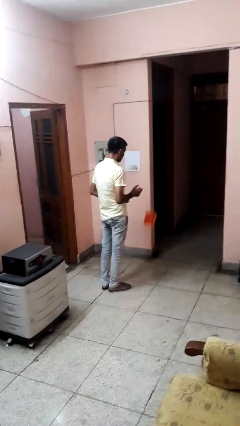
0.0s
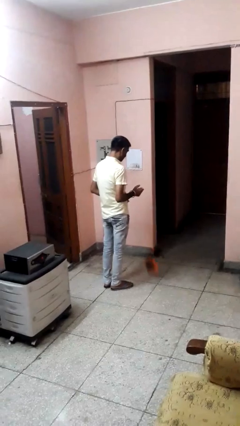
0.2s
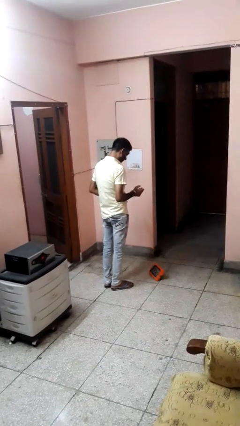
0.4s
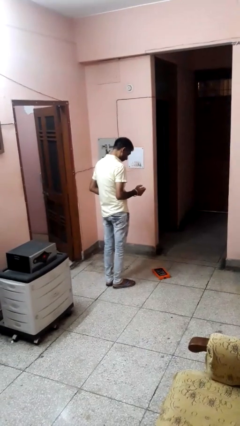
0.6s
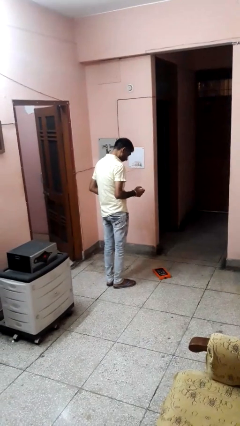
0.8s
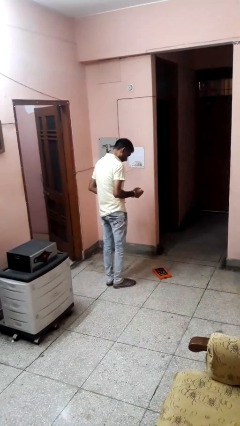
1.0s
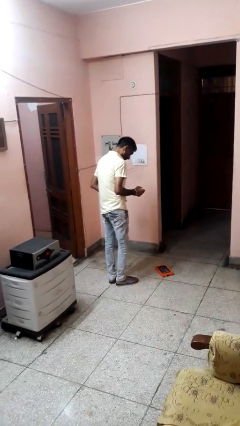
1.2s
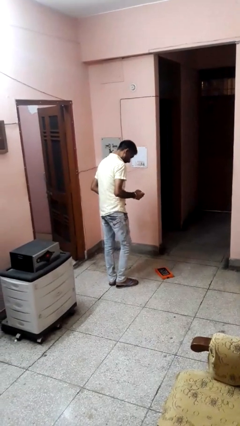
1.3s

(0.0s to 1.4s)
person drops object

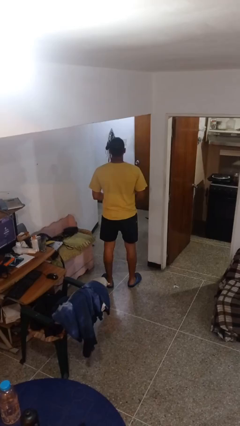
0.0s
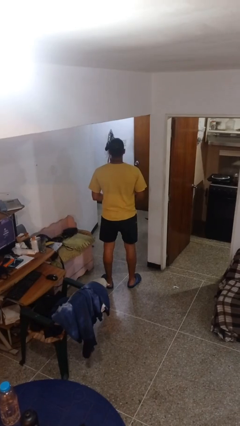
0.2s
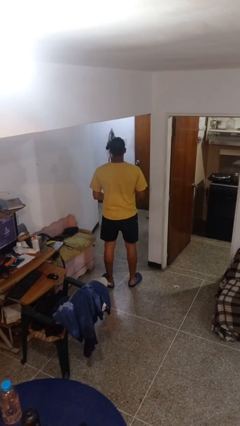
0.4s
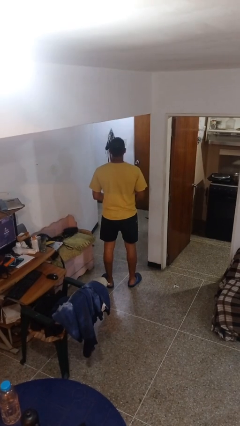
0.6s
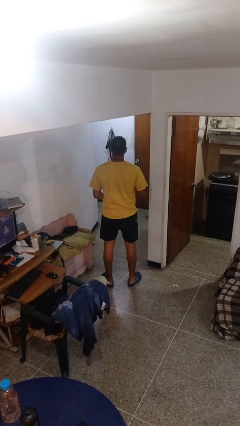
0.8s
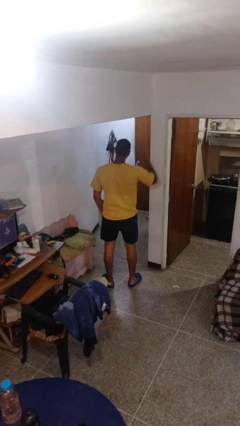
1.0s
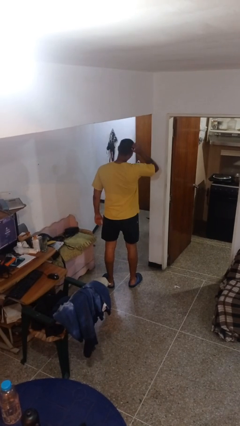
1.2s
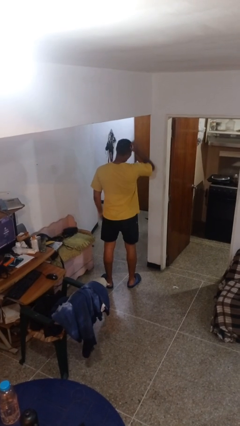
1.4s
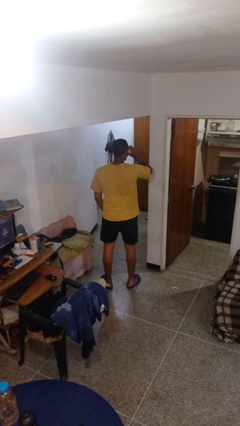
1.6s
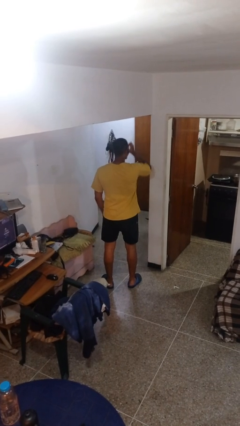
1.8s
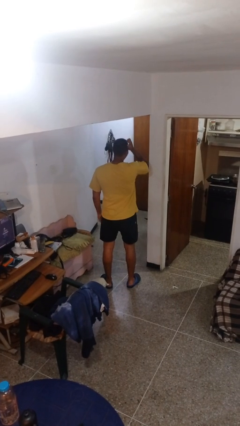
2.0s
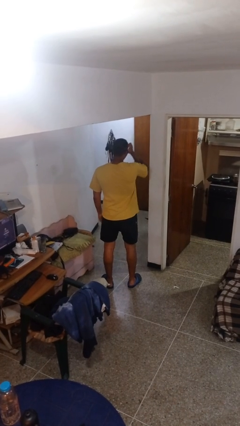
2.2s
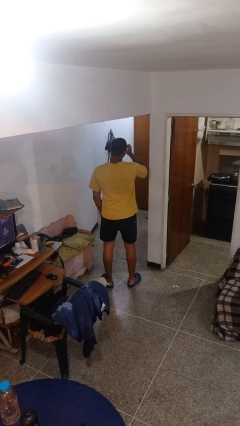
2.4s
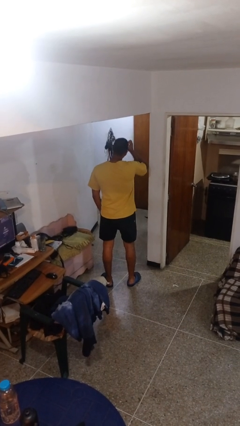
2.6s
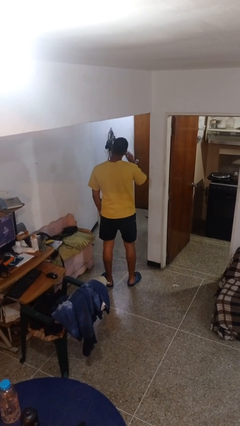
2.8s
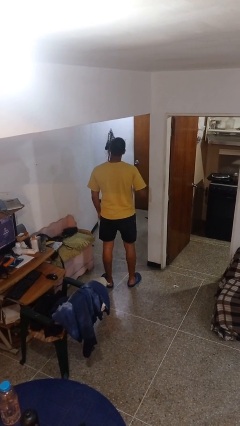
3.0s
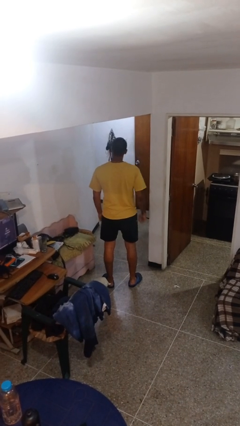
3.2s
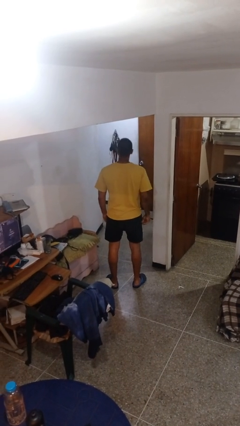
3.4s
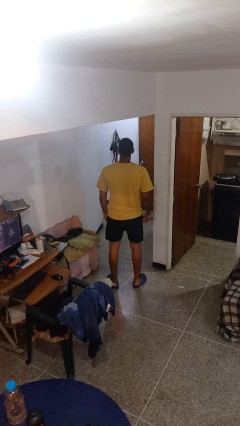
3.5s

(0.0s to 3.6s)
person scratches face

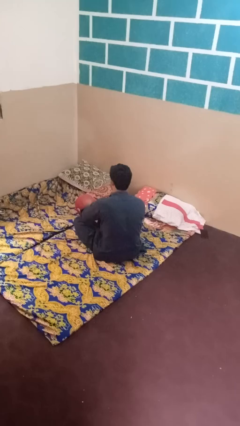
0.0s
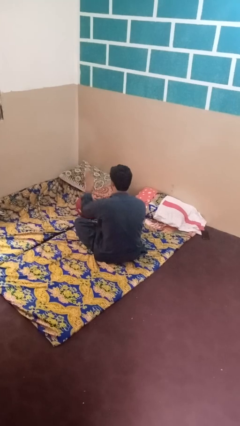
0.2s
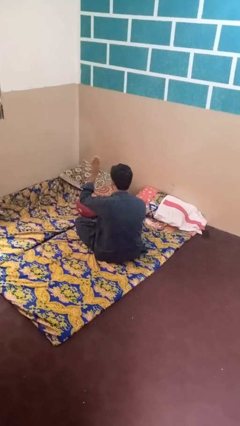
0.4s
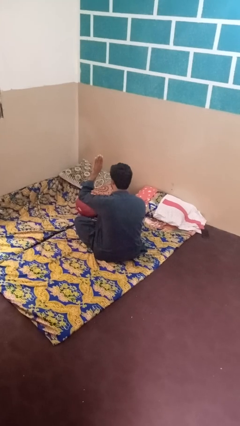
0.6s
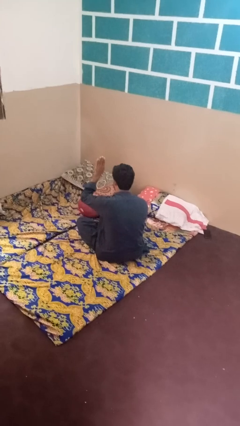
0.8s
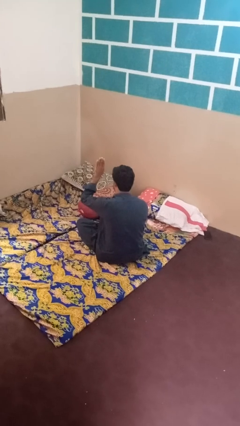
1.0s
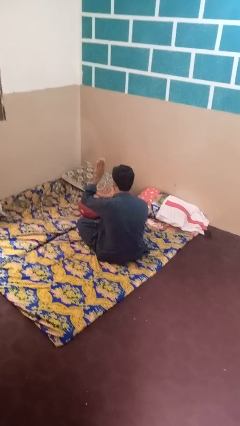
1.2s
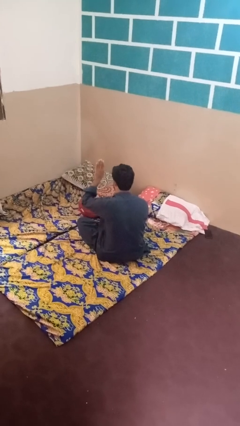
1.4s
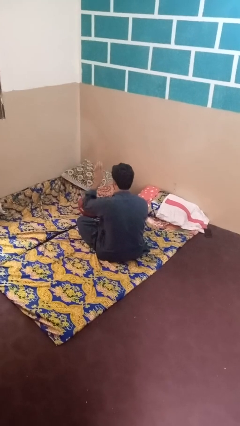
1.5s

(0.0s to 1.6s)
person gestures number four

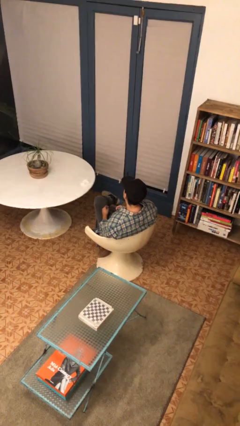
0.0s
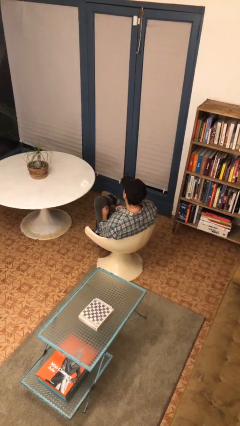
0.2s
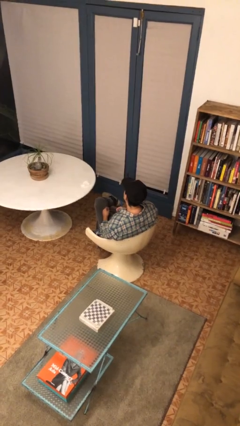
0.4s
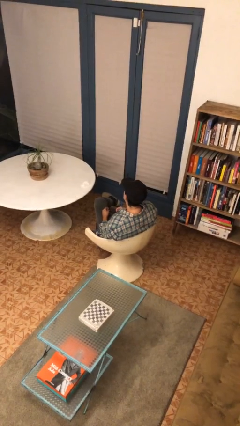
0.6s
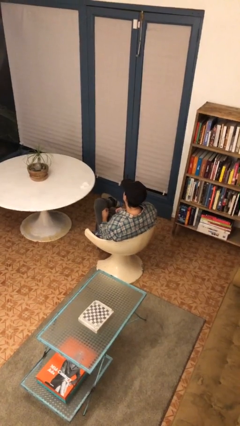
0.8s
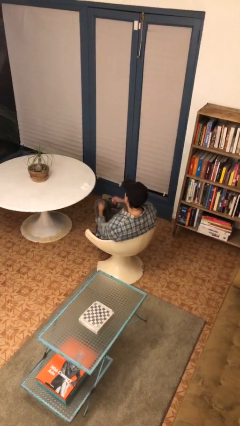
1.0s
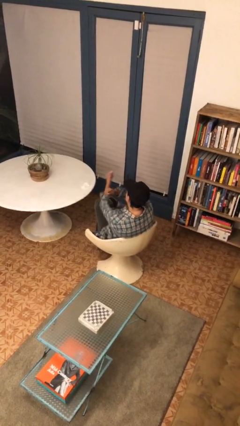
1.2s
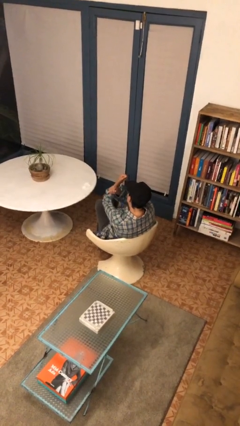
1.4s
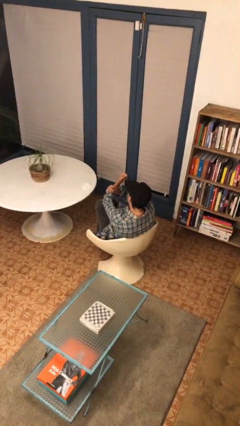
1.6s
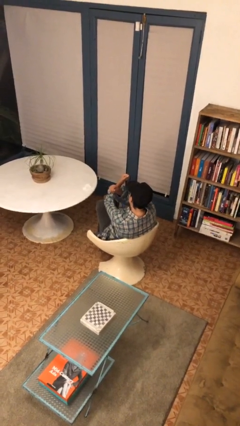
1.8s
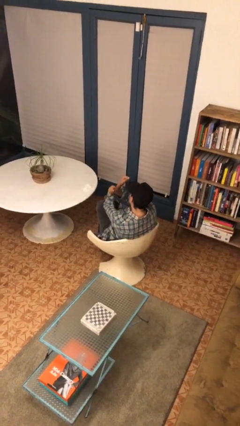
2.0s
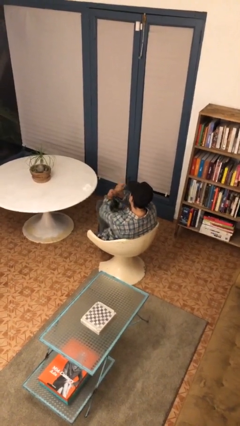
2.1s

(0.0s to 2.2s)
person gestures arms x

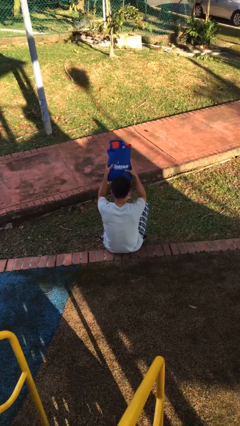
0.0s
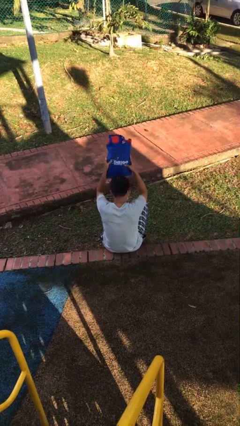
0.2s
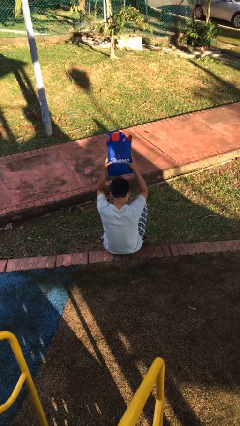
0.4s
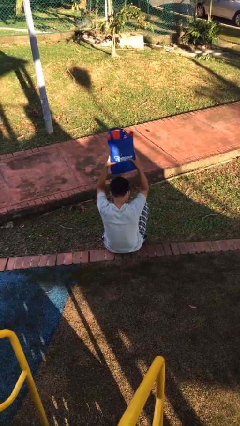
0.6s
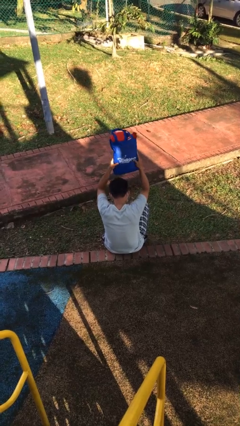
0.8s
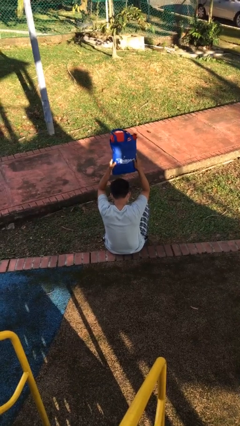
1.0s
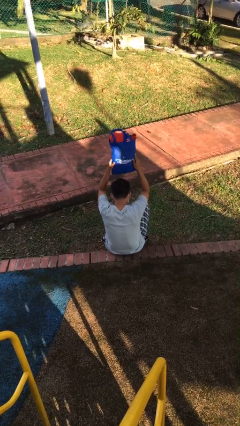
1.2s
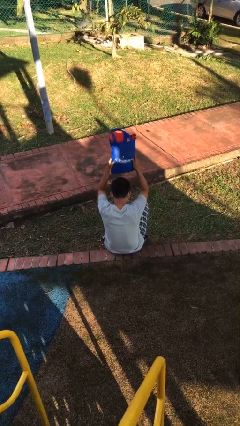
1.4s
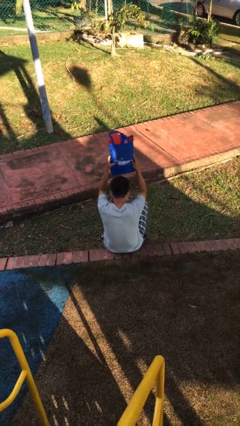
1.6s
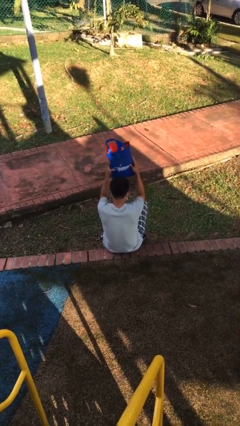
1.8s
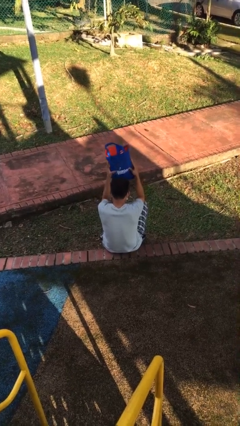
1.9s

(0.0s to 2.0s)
person holds object above head

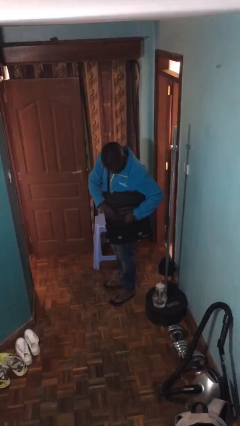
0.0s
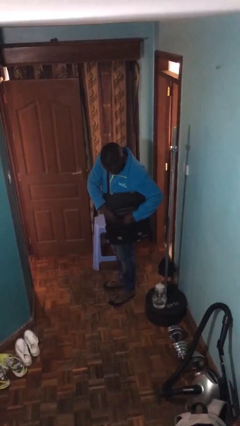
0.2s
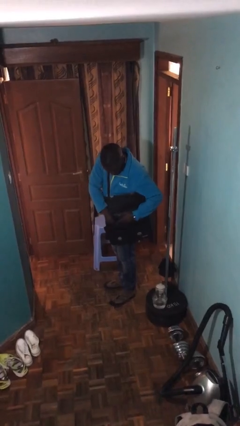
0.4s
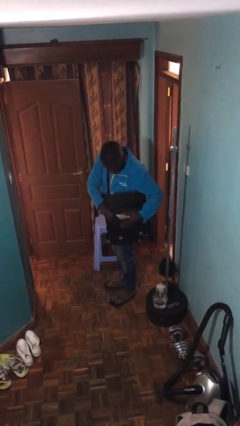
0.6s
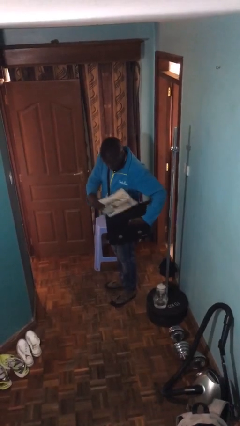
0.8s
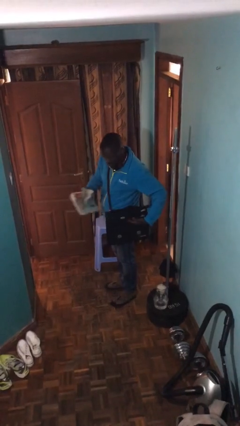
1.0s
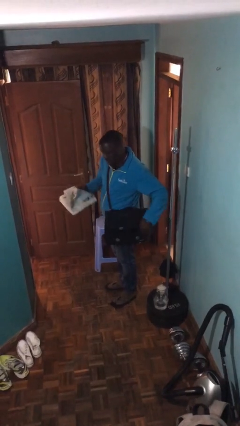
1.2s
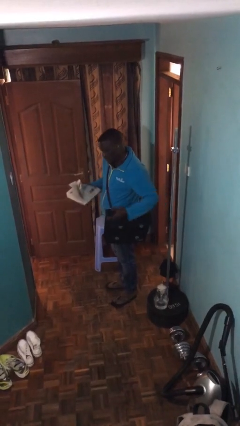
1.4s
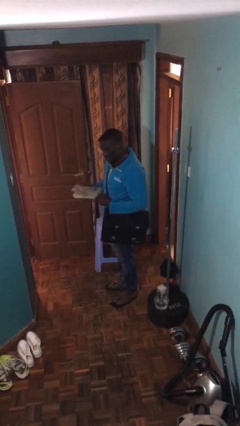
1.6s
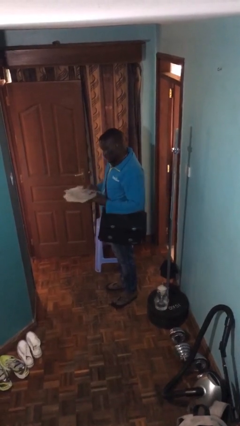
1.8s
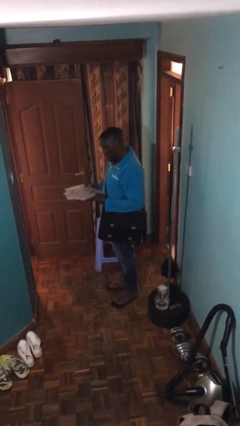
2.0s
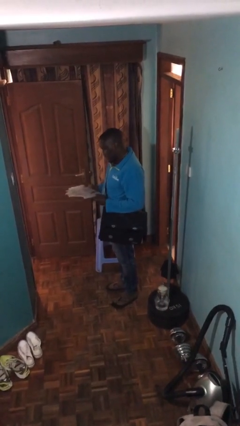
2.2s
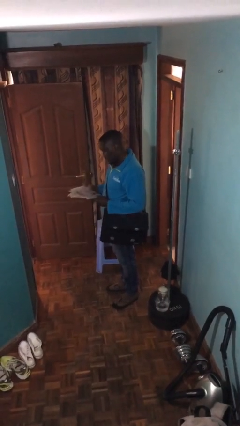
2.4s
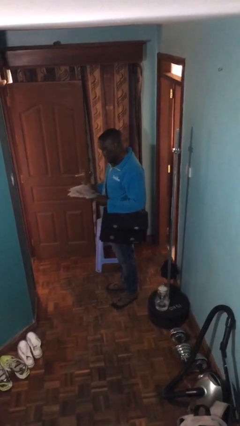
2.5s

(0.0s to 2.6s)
person takes object from purse

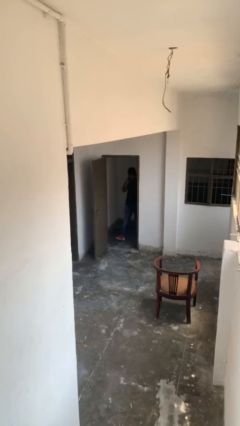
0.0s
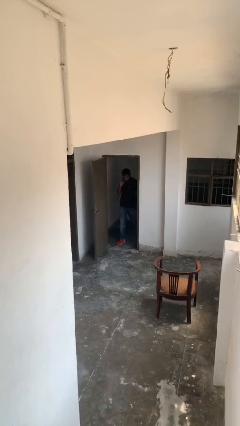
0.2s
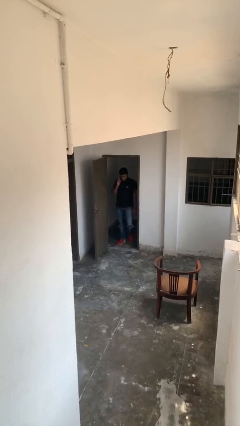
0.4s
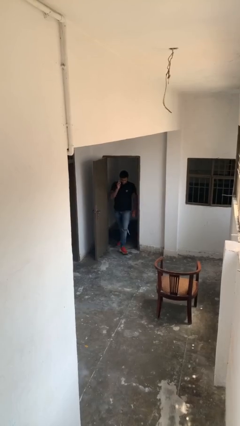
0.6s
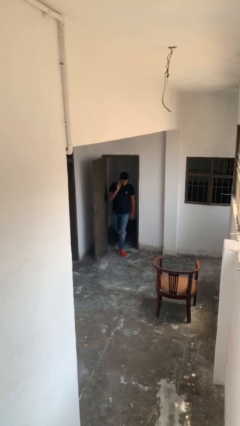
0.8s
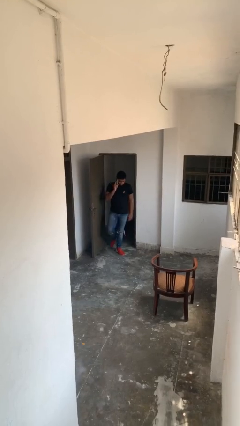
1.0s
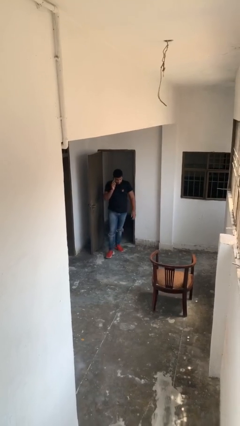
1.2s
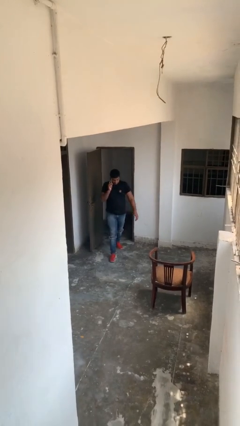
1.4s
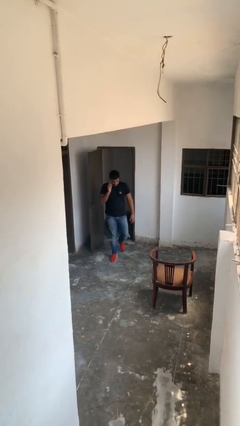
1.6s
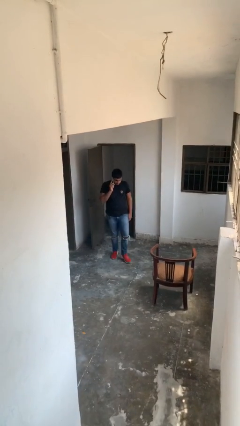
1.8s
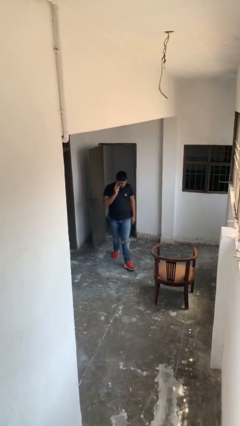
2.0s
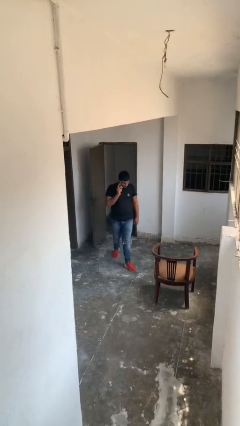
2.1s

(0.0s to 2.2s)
person enters scene through structure

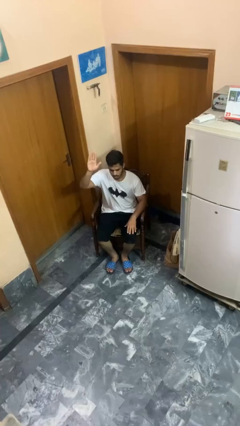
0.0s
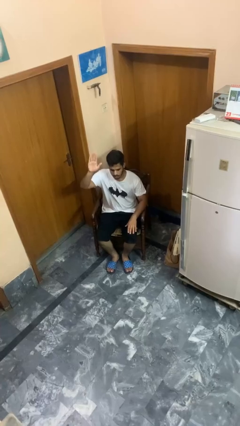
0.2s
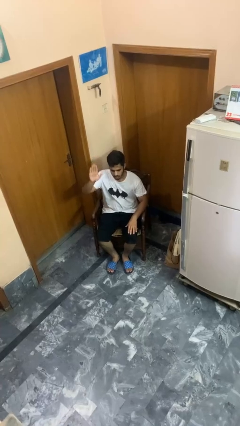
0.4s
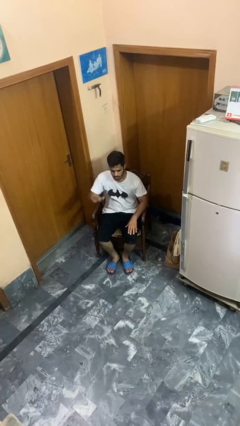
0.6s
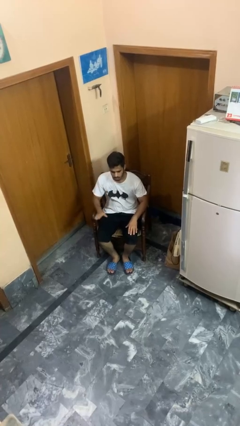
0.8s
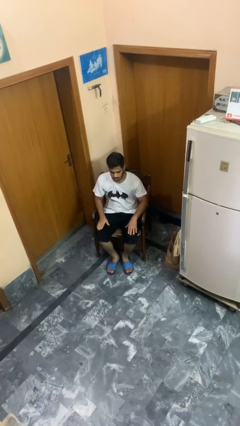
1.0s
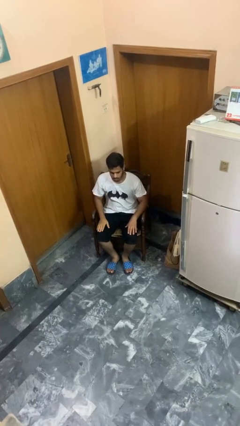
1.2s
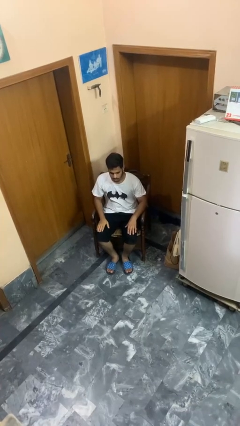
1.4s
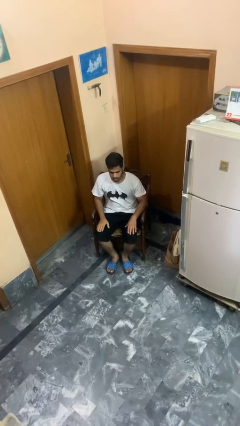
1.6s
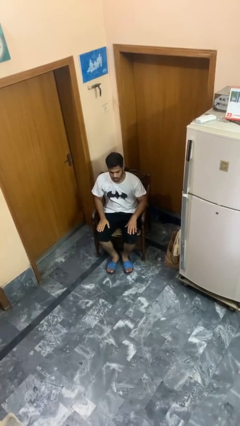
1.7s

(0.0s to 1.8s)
person gestures lower hand
